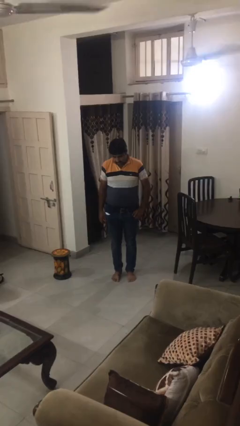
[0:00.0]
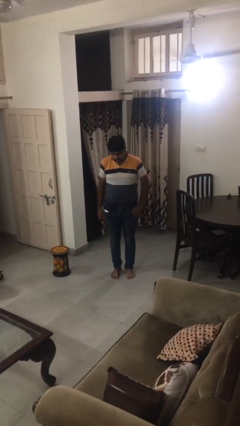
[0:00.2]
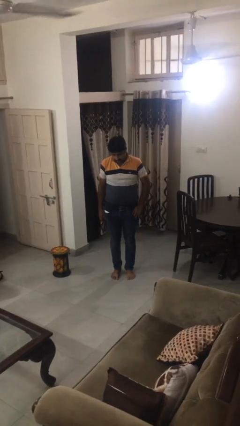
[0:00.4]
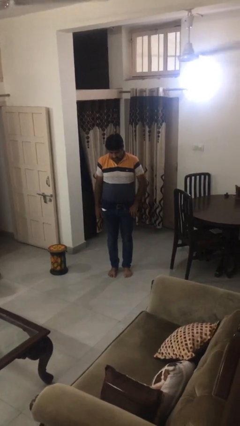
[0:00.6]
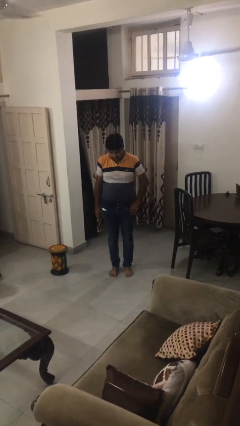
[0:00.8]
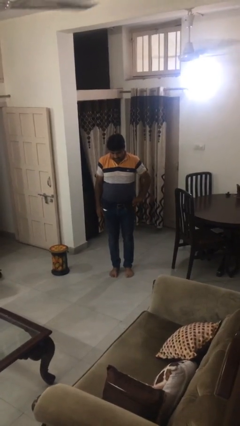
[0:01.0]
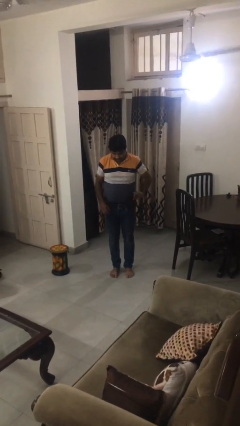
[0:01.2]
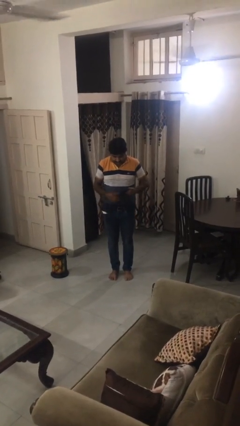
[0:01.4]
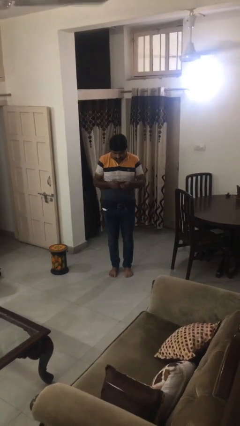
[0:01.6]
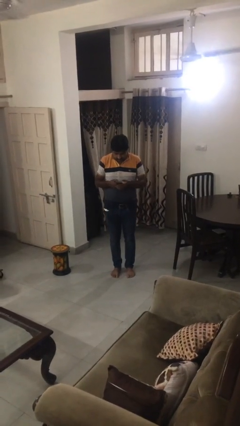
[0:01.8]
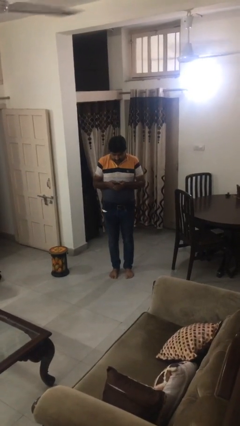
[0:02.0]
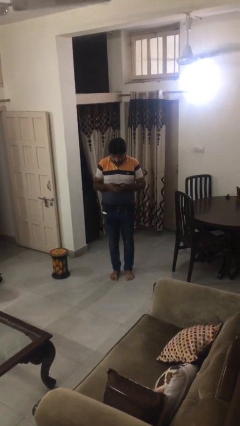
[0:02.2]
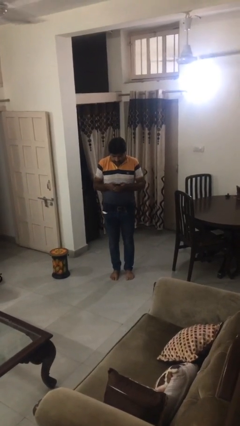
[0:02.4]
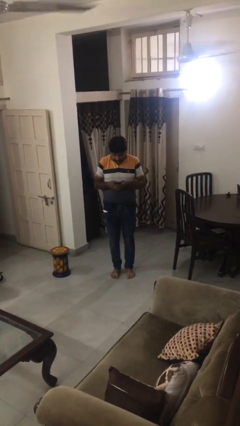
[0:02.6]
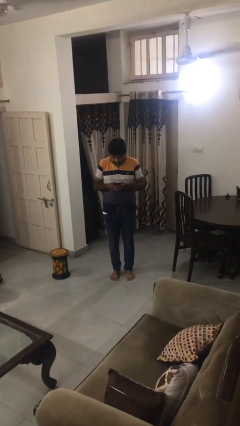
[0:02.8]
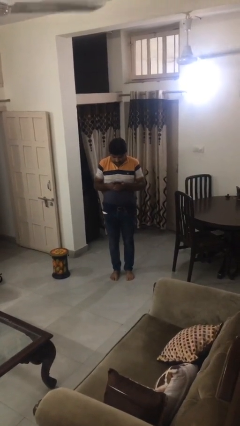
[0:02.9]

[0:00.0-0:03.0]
person takes phone from pocket

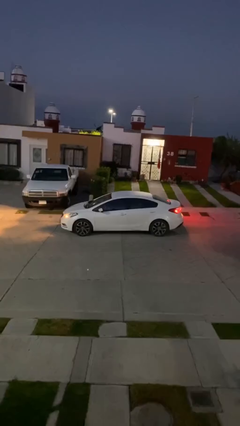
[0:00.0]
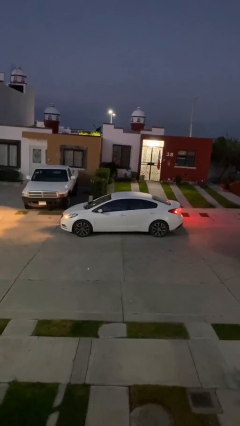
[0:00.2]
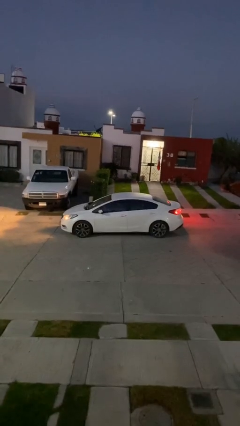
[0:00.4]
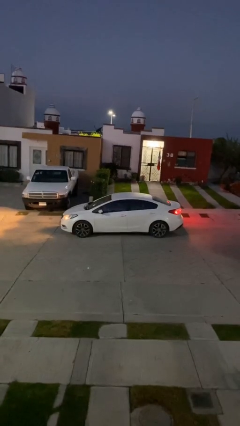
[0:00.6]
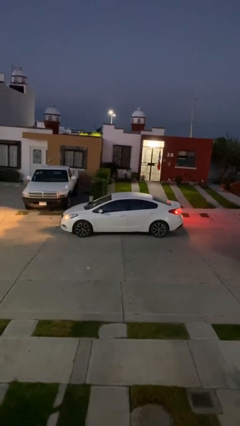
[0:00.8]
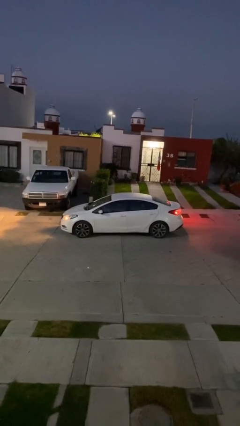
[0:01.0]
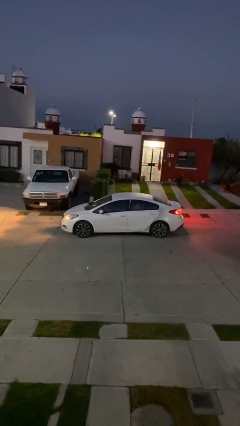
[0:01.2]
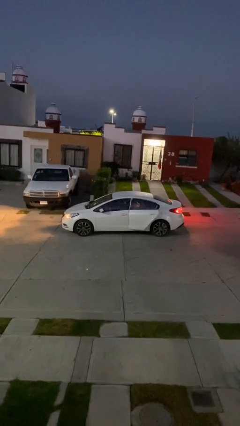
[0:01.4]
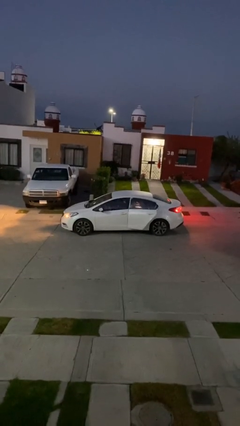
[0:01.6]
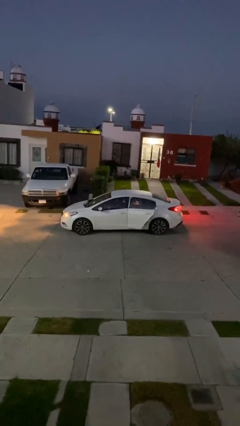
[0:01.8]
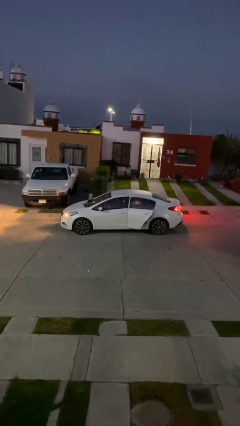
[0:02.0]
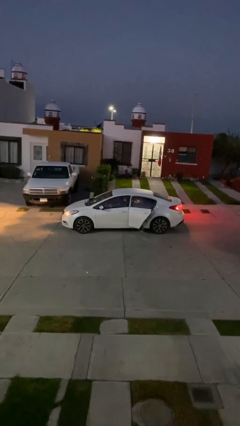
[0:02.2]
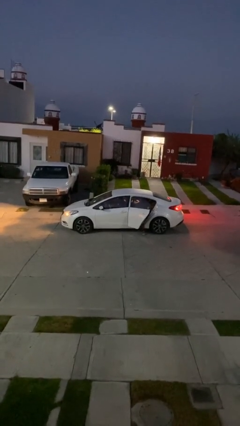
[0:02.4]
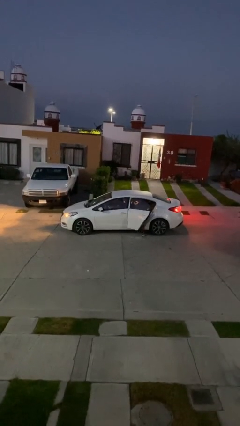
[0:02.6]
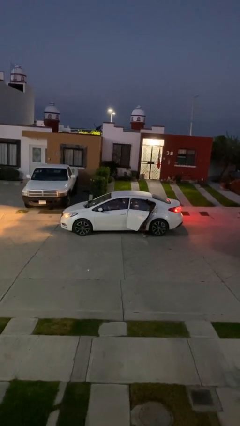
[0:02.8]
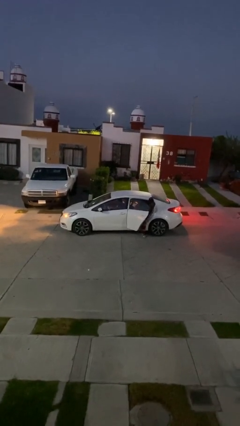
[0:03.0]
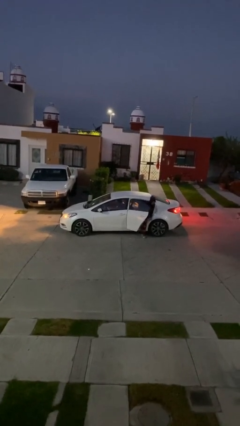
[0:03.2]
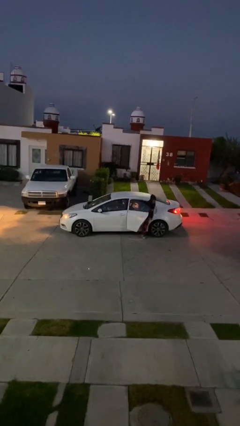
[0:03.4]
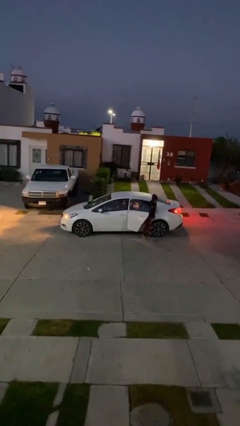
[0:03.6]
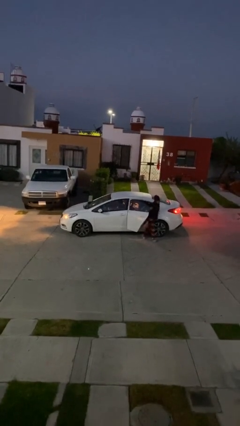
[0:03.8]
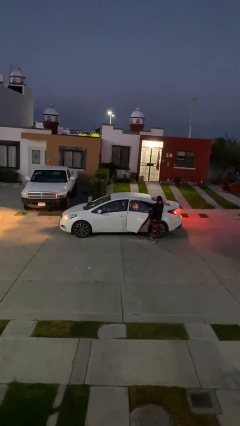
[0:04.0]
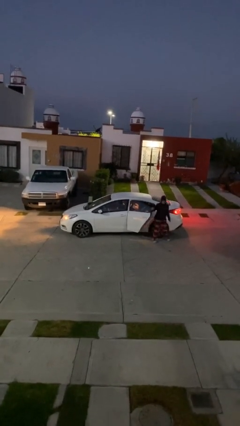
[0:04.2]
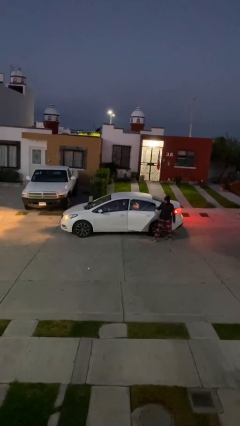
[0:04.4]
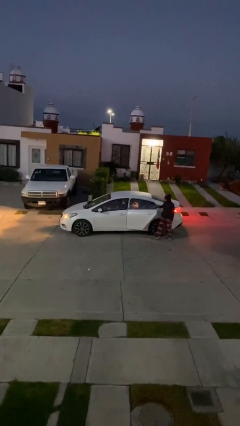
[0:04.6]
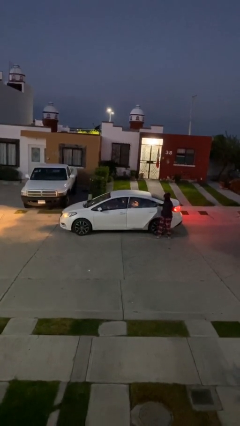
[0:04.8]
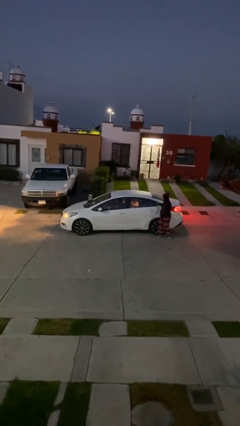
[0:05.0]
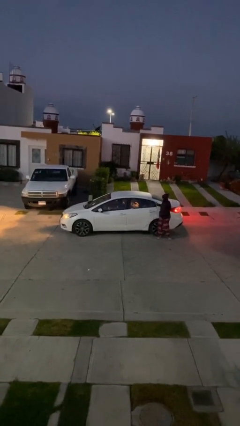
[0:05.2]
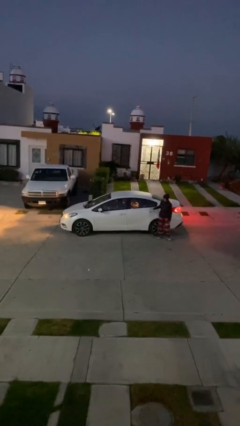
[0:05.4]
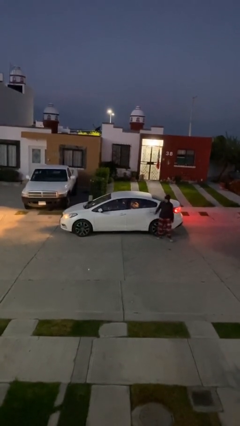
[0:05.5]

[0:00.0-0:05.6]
car drops off person

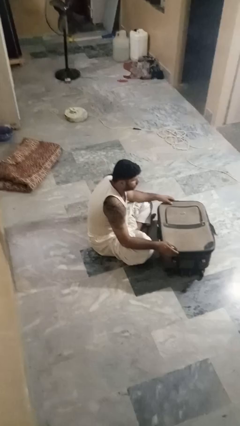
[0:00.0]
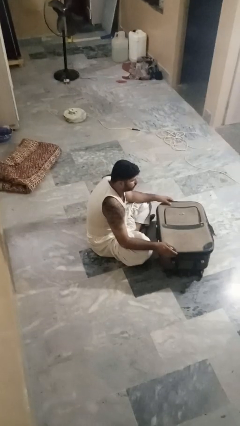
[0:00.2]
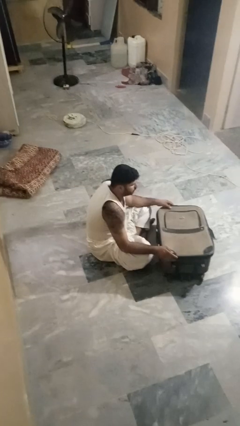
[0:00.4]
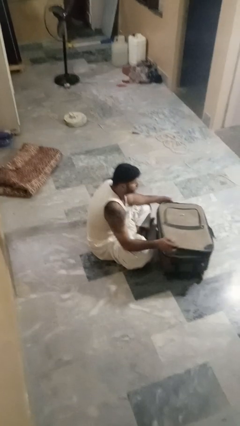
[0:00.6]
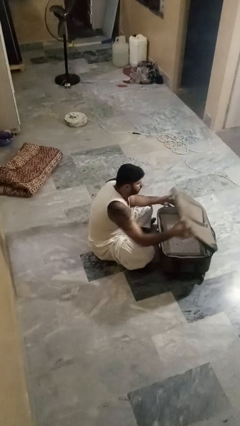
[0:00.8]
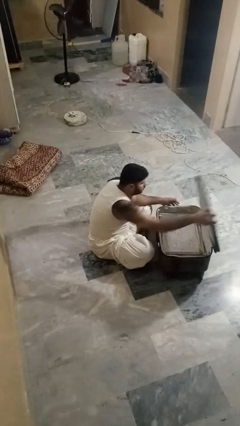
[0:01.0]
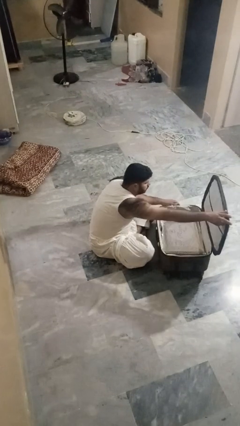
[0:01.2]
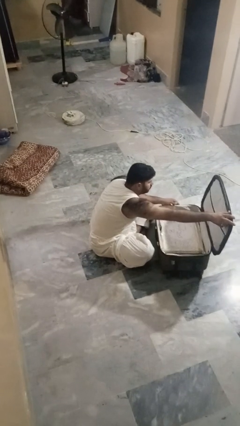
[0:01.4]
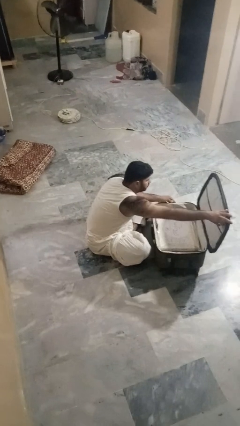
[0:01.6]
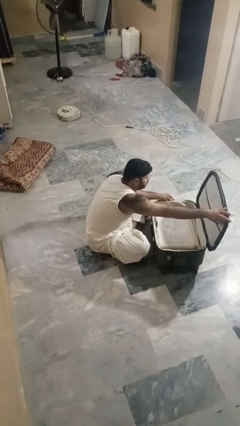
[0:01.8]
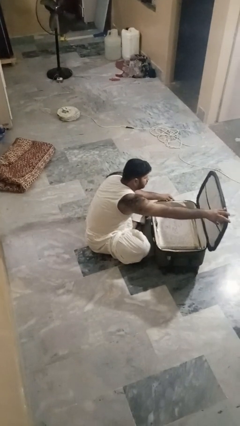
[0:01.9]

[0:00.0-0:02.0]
person opens suitcase

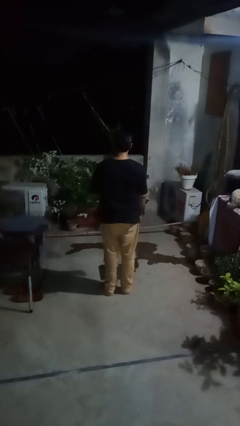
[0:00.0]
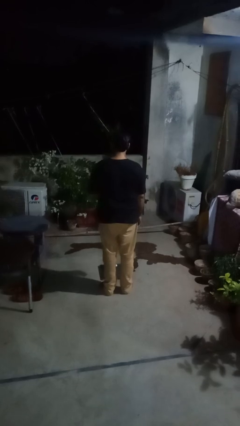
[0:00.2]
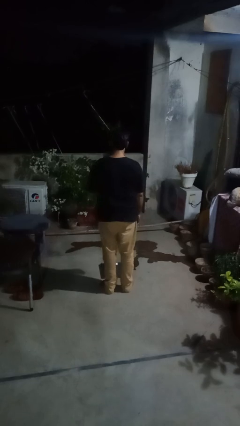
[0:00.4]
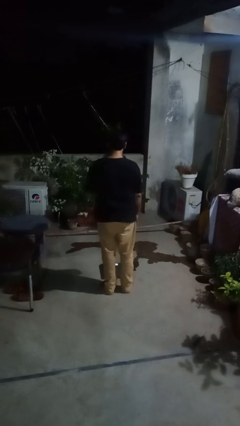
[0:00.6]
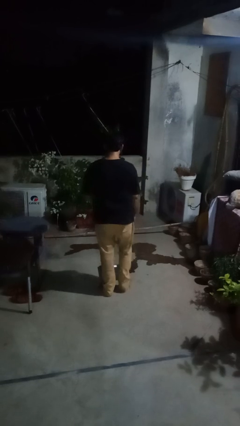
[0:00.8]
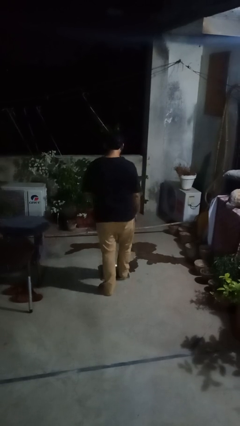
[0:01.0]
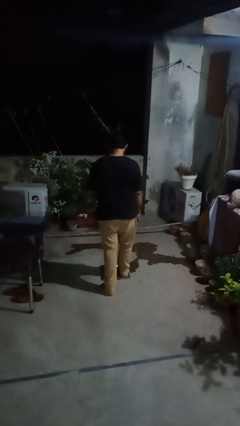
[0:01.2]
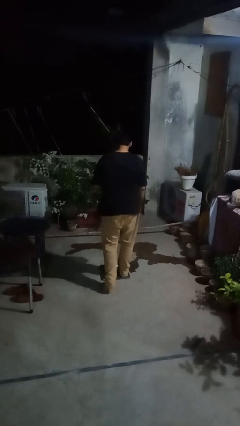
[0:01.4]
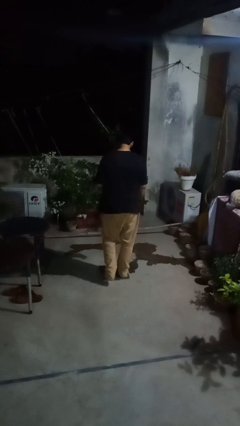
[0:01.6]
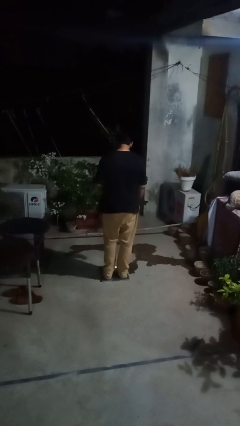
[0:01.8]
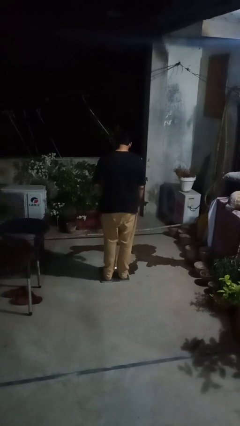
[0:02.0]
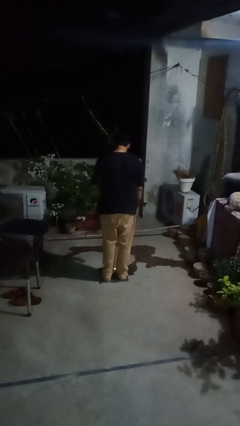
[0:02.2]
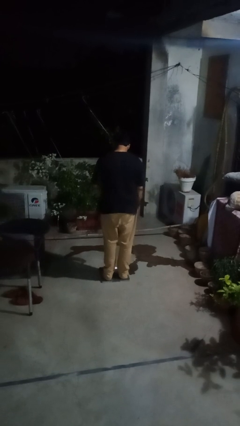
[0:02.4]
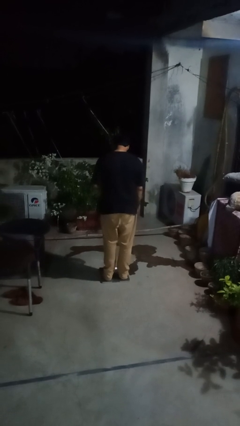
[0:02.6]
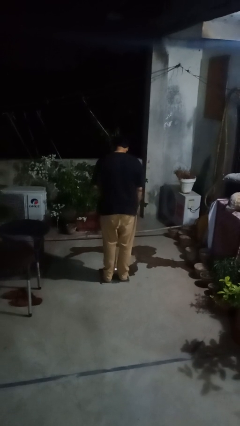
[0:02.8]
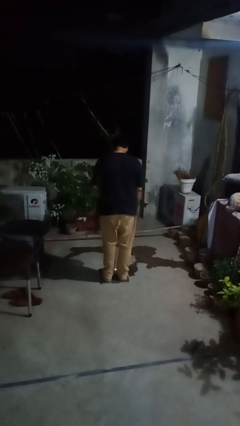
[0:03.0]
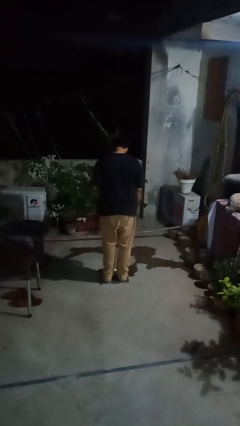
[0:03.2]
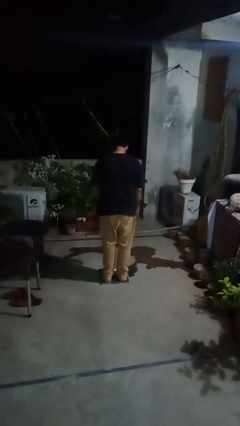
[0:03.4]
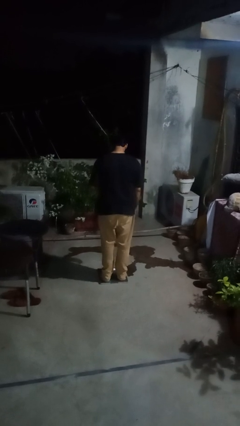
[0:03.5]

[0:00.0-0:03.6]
person uses bodyweight scale

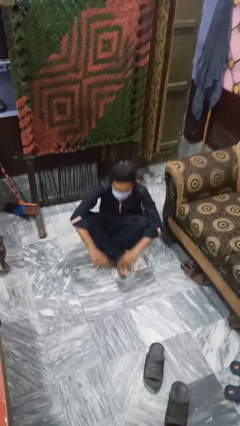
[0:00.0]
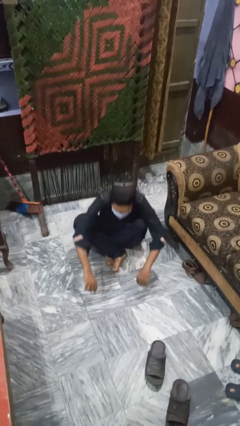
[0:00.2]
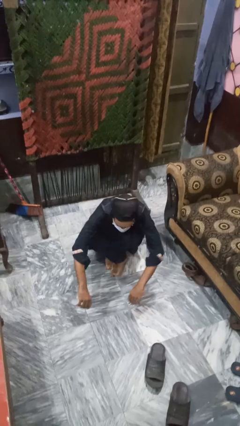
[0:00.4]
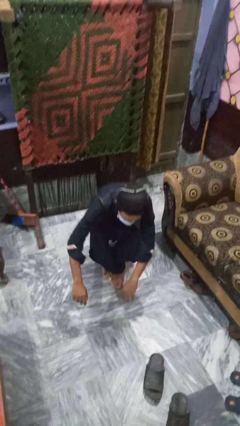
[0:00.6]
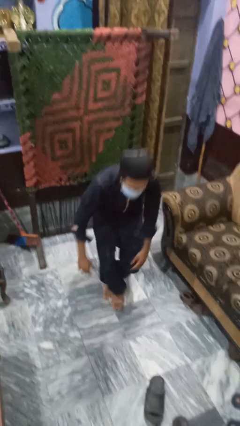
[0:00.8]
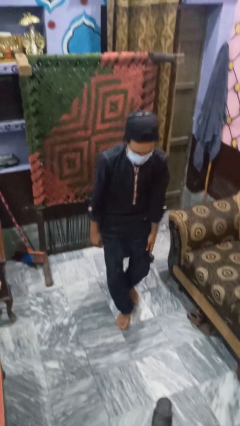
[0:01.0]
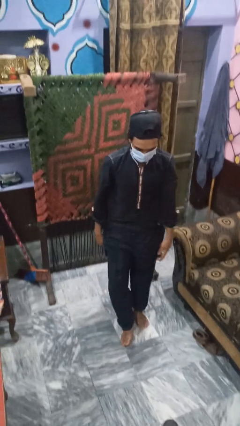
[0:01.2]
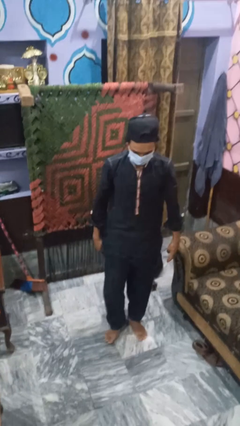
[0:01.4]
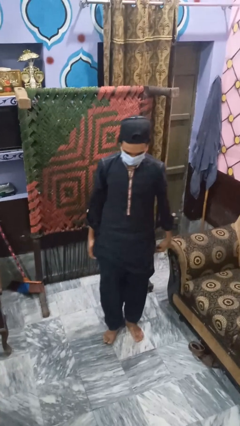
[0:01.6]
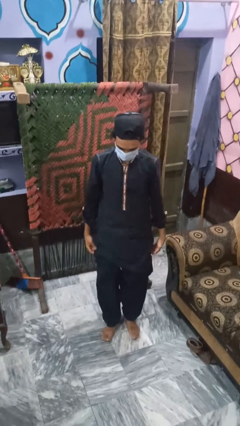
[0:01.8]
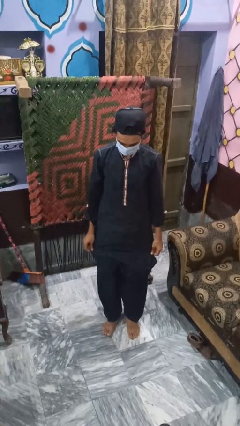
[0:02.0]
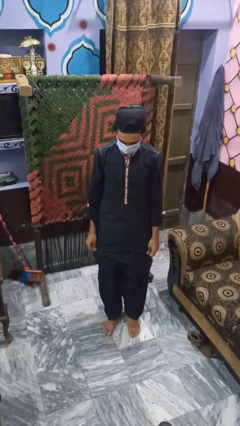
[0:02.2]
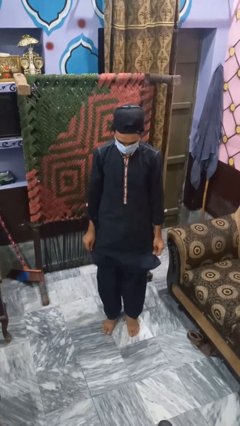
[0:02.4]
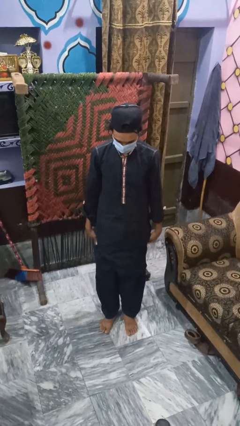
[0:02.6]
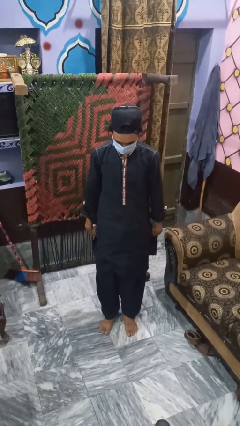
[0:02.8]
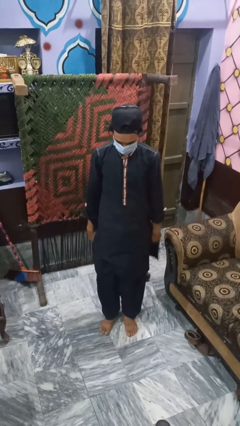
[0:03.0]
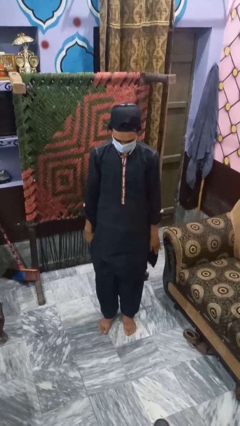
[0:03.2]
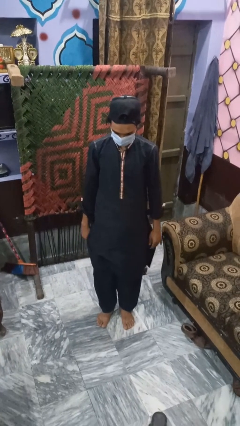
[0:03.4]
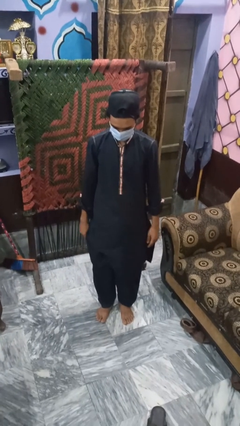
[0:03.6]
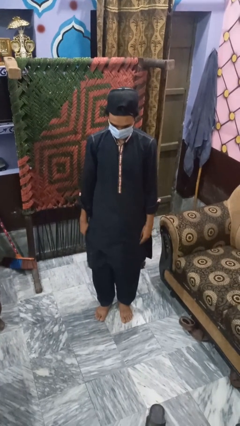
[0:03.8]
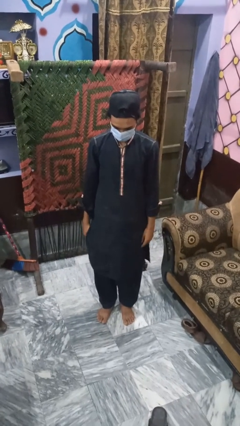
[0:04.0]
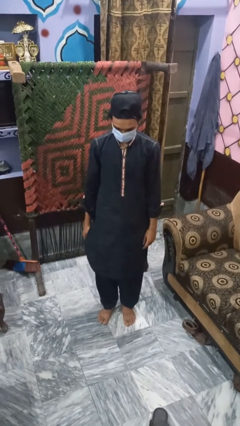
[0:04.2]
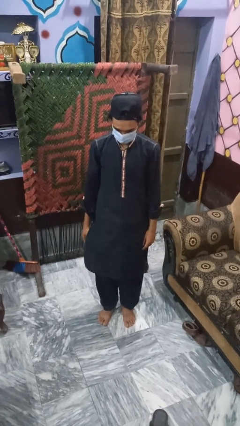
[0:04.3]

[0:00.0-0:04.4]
person stands up from floor
